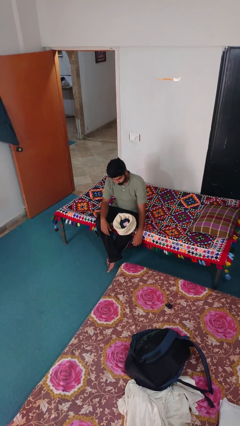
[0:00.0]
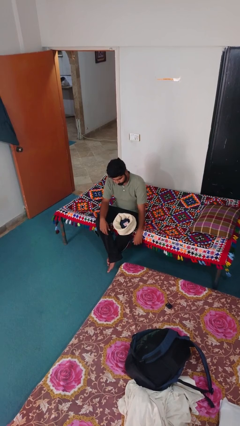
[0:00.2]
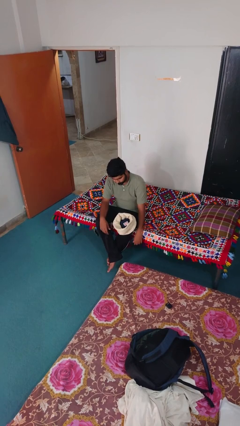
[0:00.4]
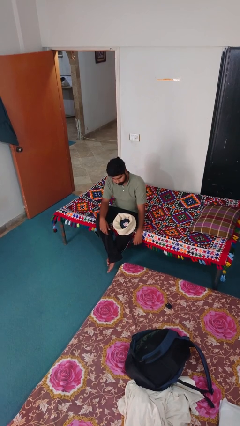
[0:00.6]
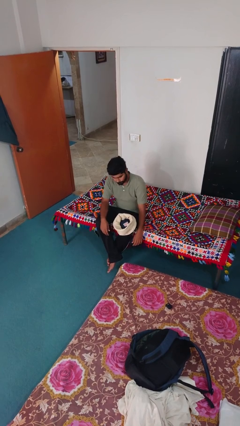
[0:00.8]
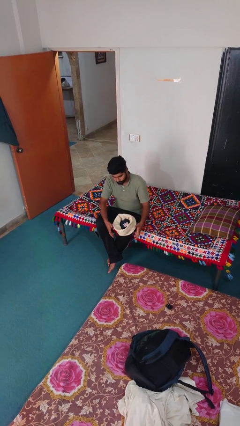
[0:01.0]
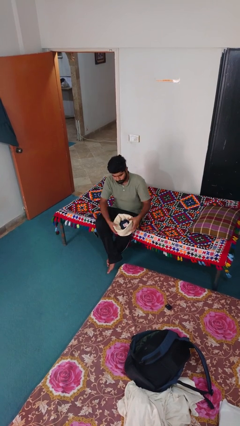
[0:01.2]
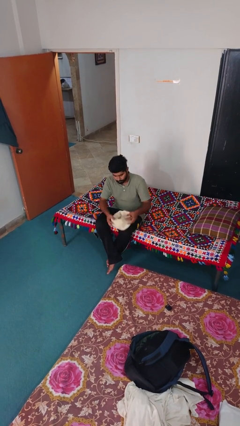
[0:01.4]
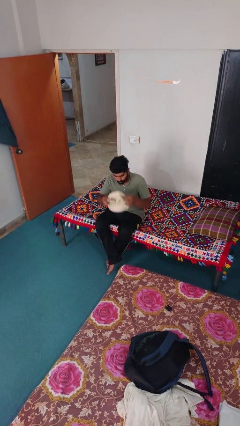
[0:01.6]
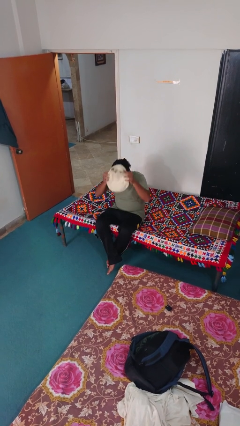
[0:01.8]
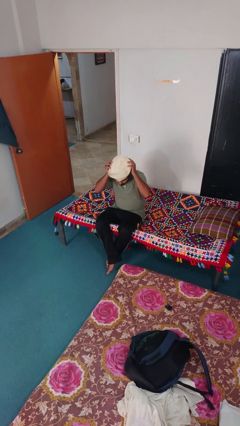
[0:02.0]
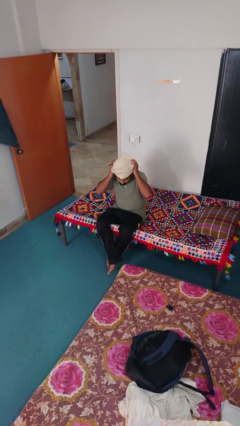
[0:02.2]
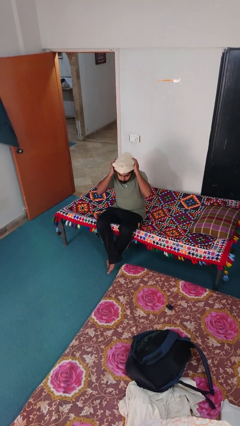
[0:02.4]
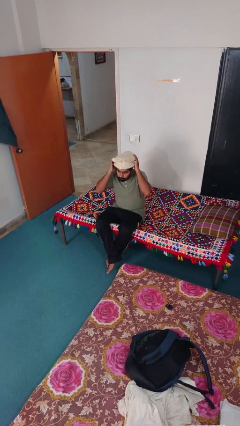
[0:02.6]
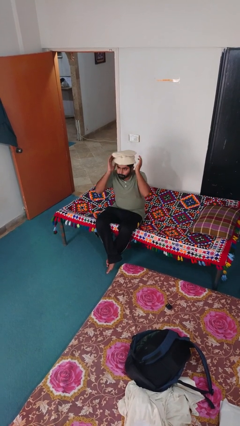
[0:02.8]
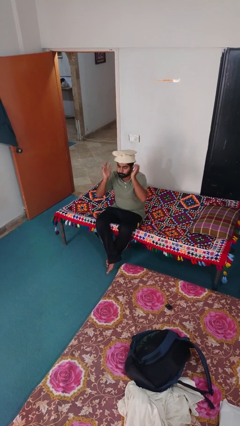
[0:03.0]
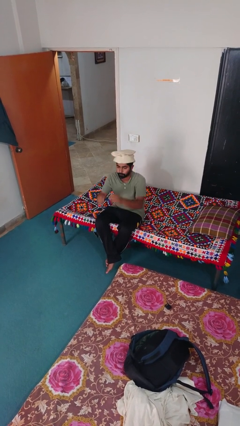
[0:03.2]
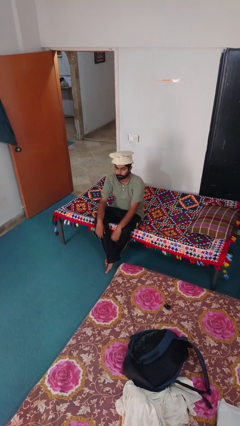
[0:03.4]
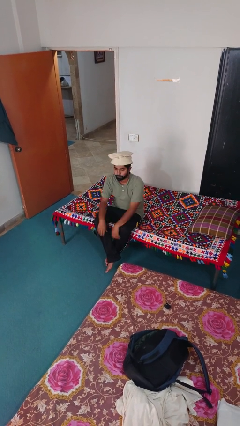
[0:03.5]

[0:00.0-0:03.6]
person puts on hat

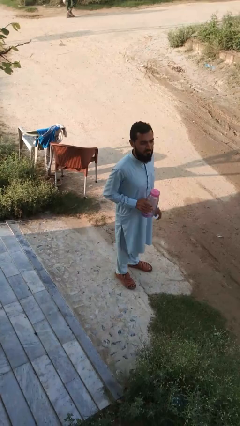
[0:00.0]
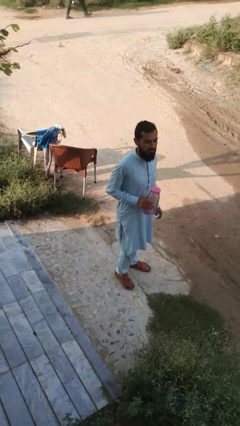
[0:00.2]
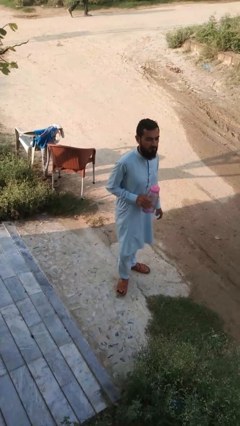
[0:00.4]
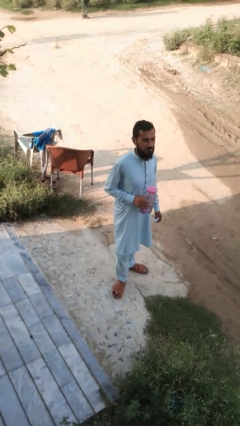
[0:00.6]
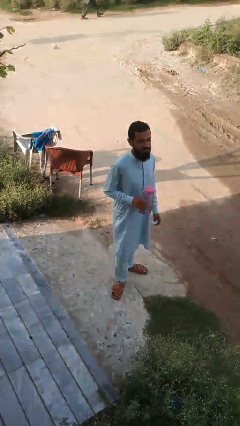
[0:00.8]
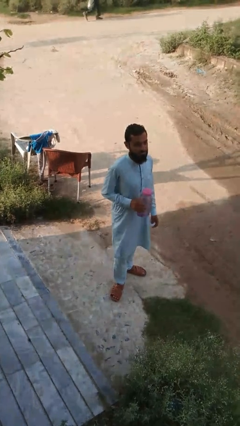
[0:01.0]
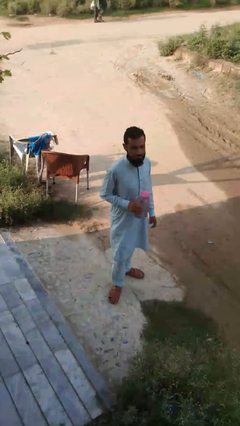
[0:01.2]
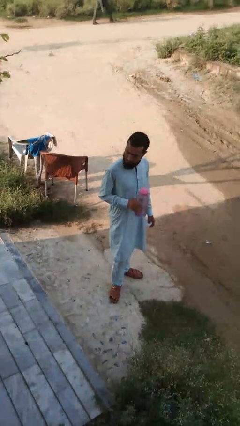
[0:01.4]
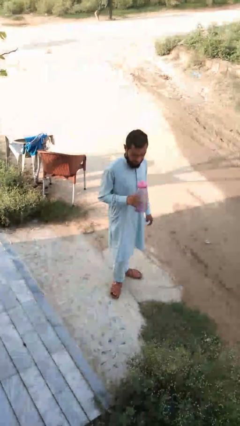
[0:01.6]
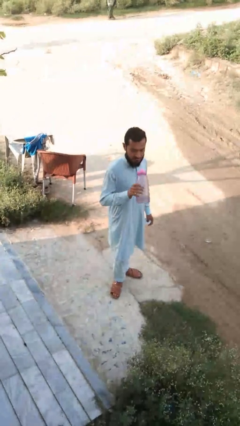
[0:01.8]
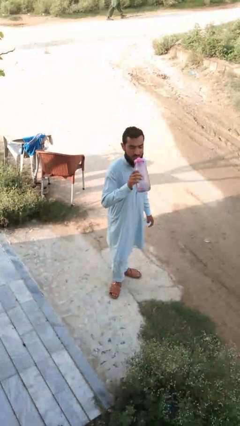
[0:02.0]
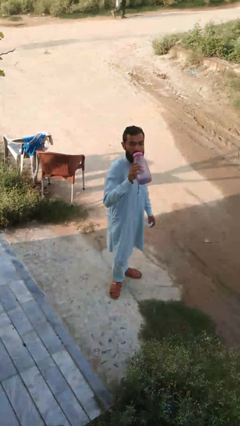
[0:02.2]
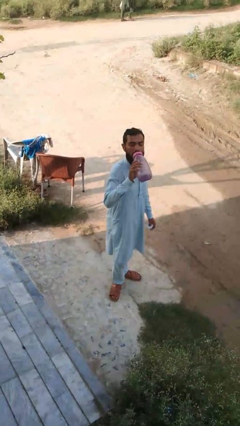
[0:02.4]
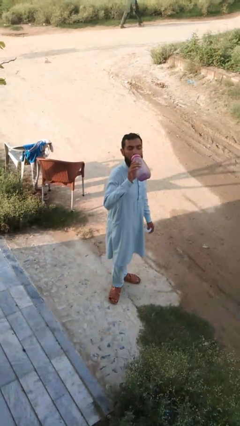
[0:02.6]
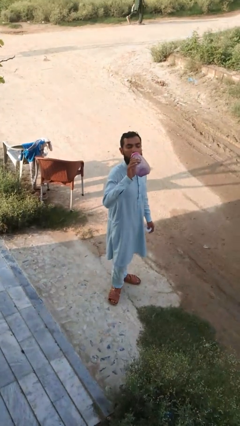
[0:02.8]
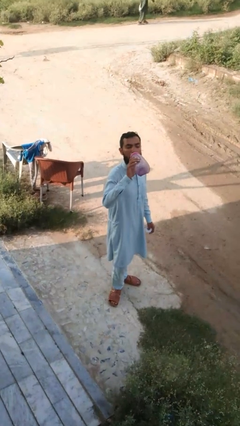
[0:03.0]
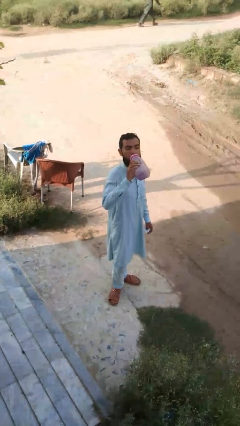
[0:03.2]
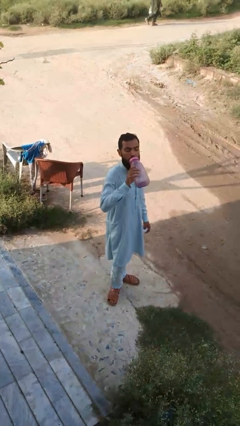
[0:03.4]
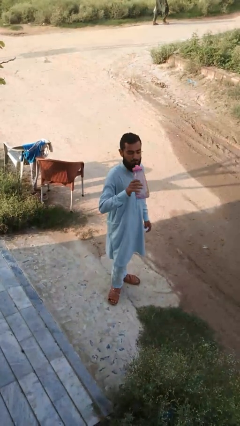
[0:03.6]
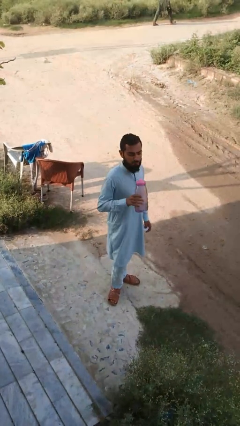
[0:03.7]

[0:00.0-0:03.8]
person drinks from bottle

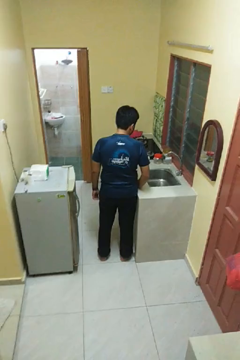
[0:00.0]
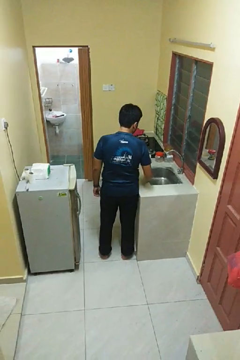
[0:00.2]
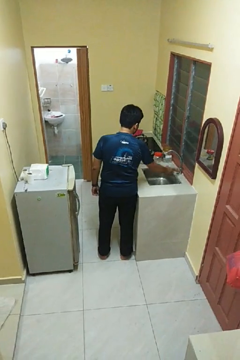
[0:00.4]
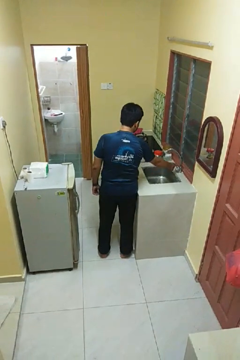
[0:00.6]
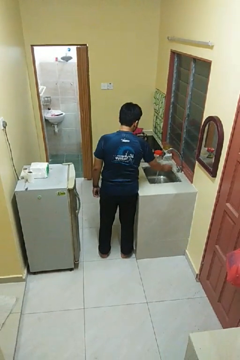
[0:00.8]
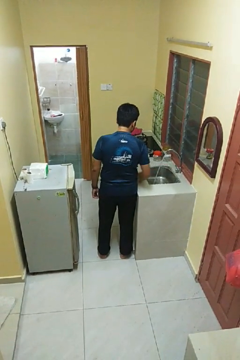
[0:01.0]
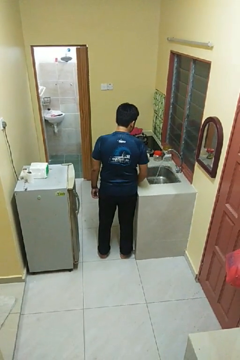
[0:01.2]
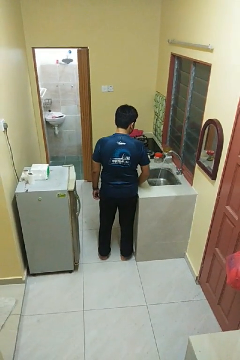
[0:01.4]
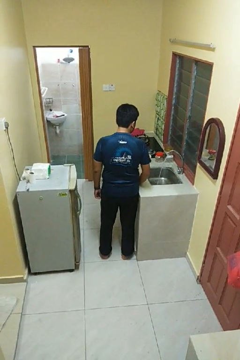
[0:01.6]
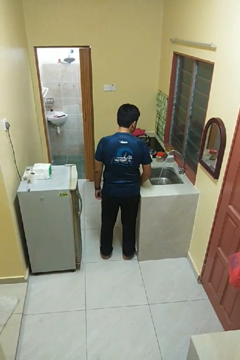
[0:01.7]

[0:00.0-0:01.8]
person turns on faucet

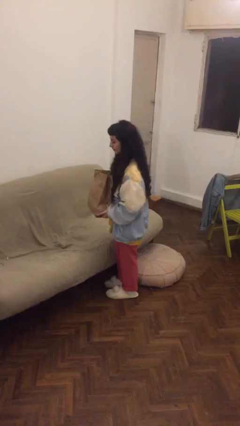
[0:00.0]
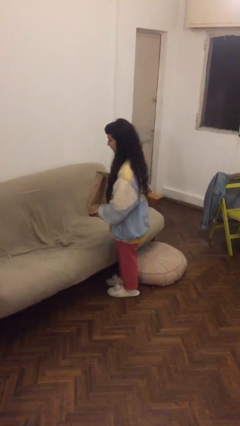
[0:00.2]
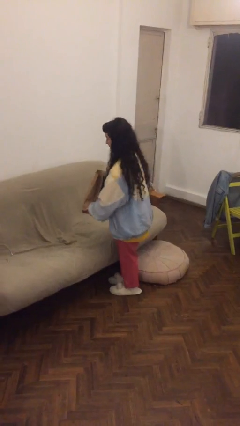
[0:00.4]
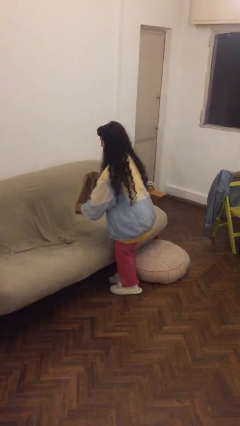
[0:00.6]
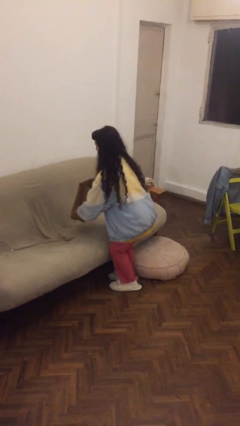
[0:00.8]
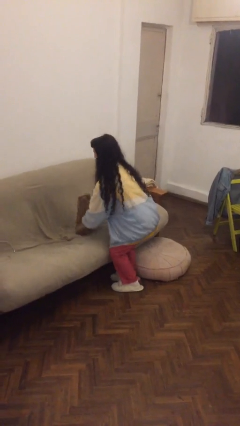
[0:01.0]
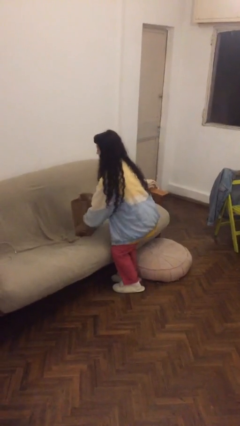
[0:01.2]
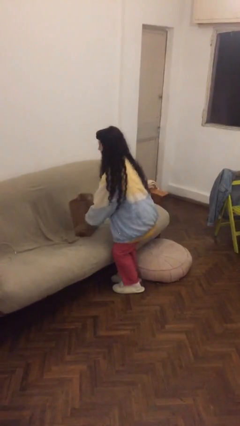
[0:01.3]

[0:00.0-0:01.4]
person puts down object on couch

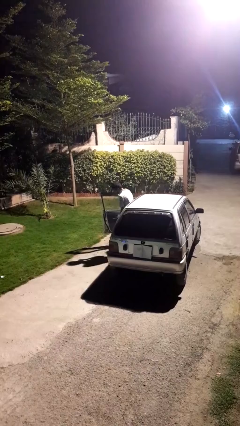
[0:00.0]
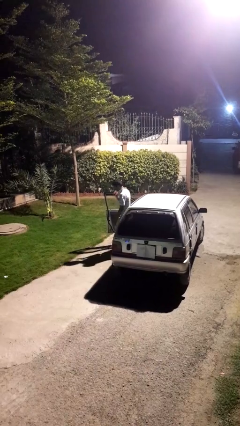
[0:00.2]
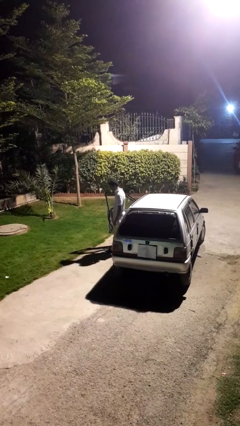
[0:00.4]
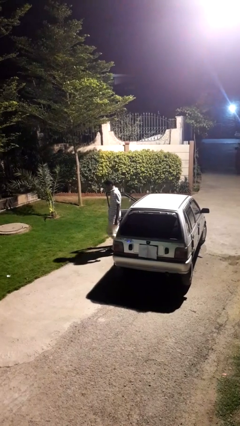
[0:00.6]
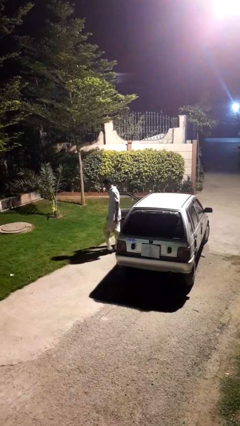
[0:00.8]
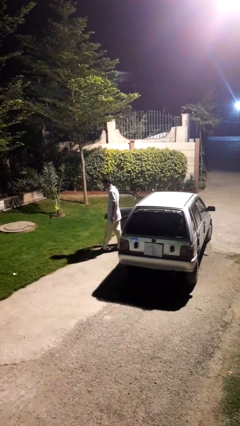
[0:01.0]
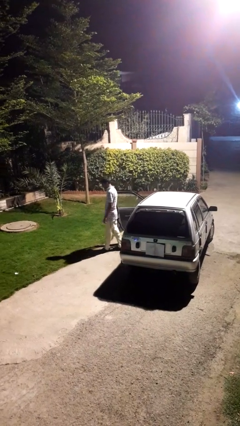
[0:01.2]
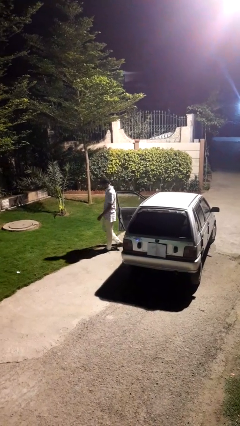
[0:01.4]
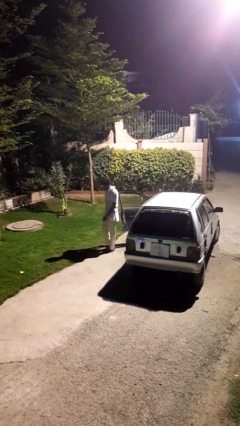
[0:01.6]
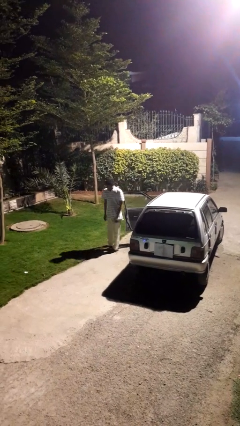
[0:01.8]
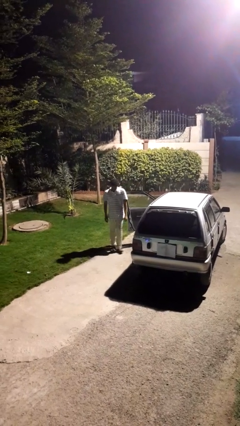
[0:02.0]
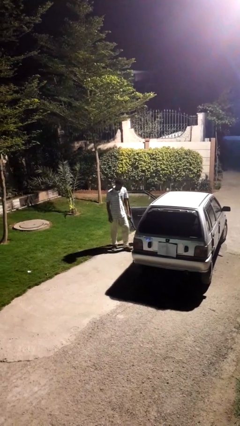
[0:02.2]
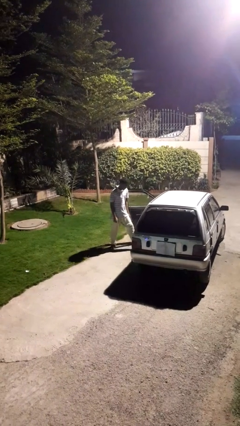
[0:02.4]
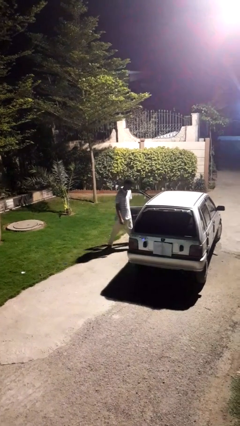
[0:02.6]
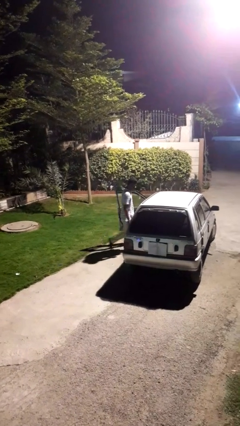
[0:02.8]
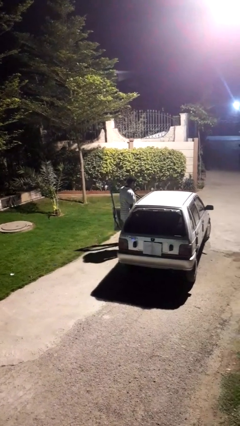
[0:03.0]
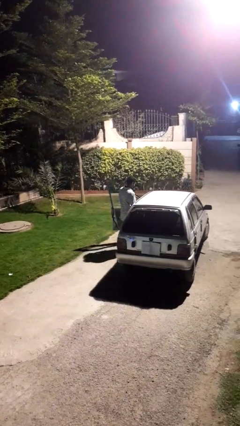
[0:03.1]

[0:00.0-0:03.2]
person exits car

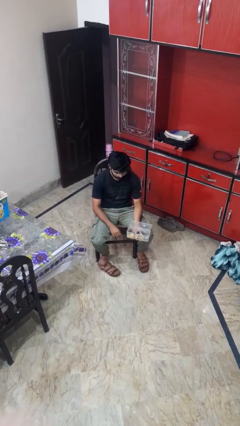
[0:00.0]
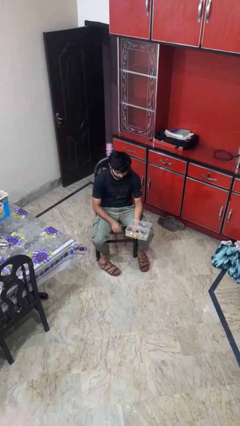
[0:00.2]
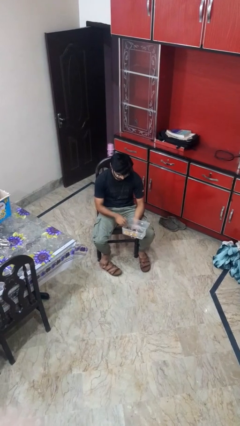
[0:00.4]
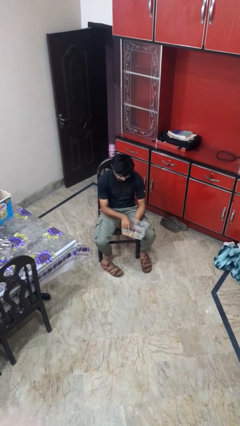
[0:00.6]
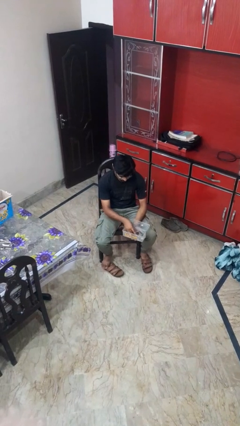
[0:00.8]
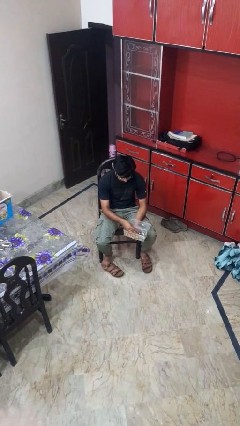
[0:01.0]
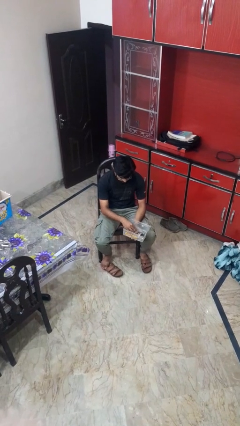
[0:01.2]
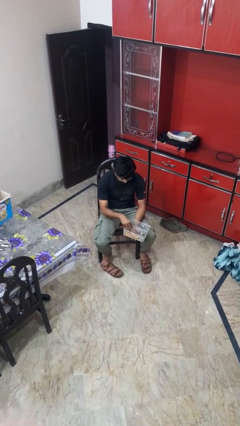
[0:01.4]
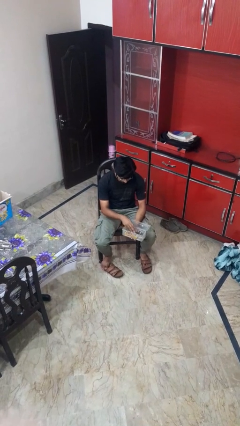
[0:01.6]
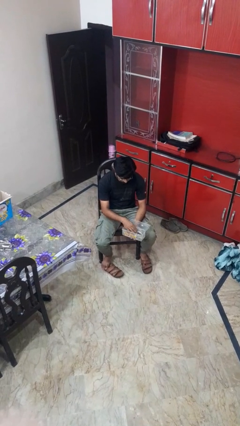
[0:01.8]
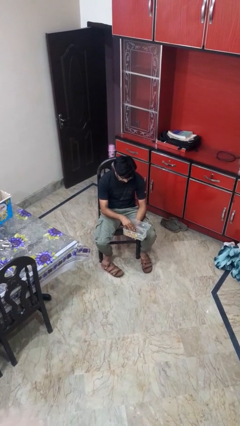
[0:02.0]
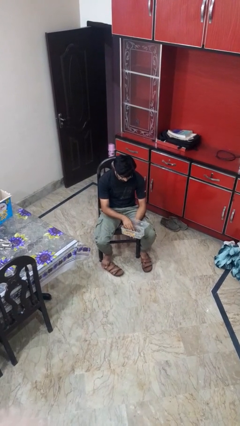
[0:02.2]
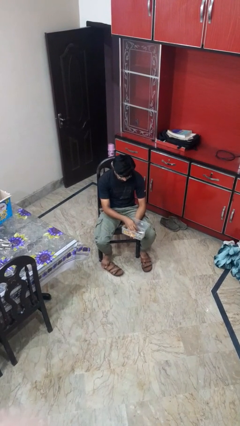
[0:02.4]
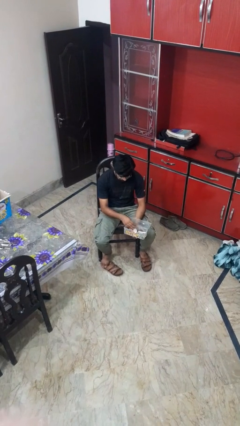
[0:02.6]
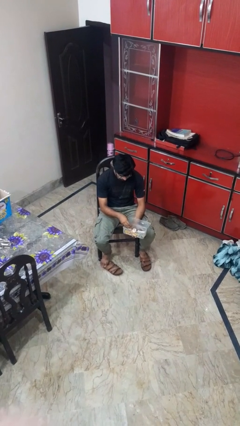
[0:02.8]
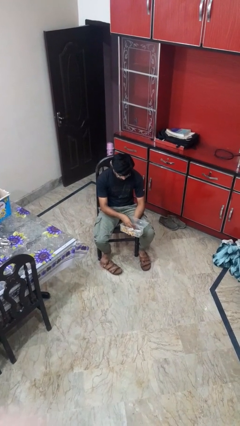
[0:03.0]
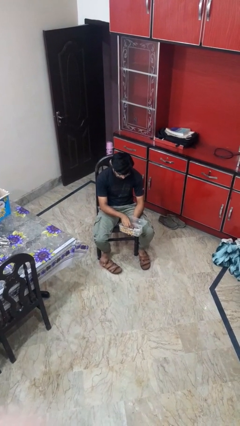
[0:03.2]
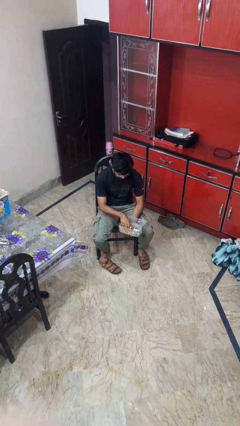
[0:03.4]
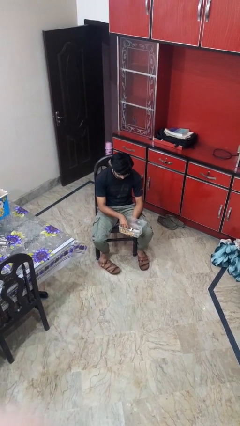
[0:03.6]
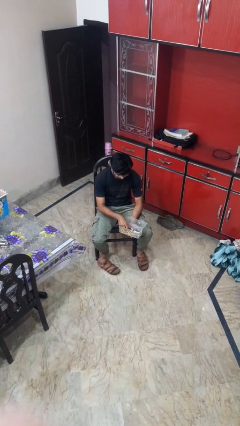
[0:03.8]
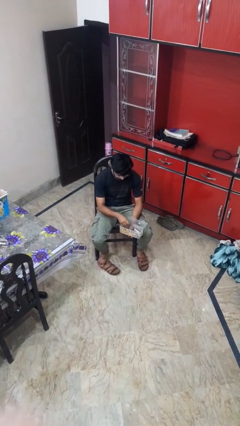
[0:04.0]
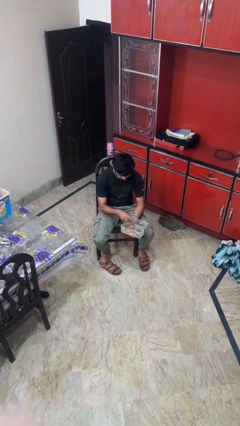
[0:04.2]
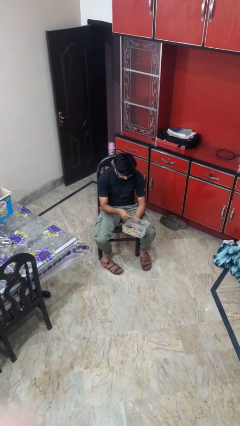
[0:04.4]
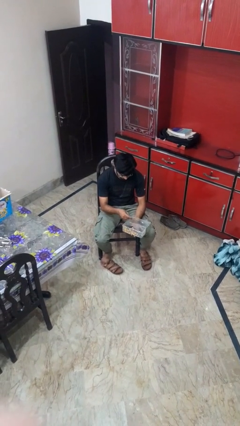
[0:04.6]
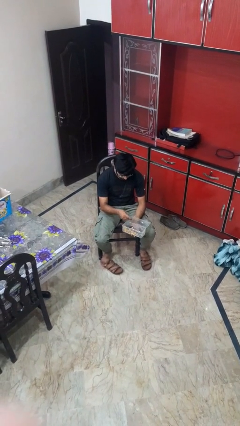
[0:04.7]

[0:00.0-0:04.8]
person searches jewelry box
